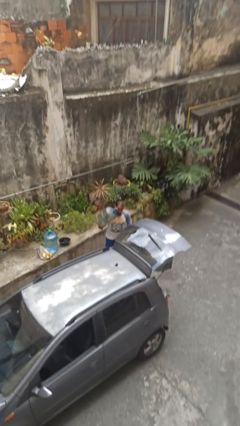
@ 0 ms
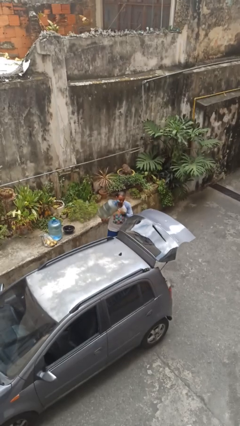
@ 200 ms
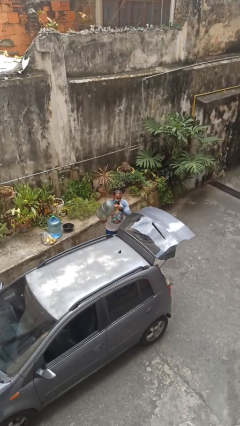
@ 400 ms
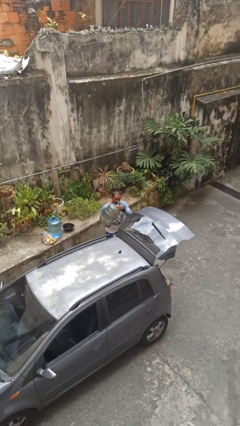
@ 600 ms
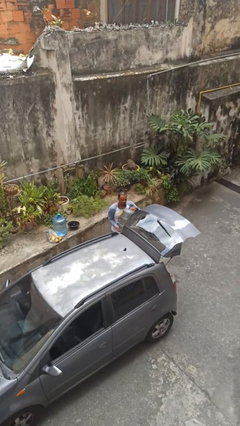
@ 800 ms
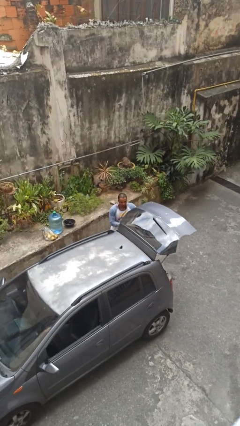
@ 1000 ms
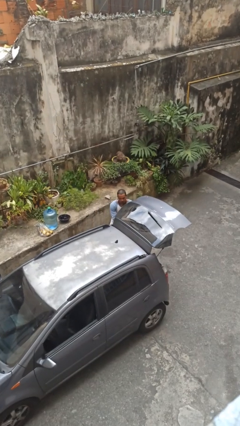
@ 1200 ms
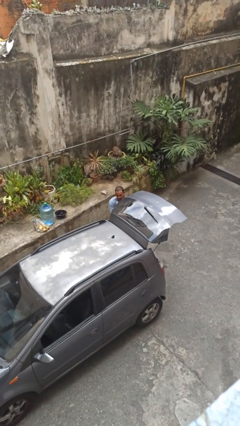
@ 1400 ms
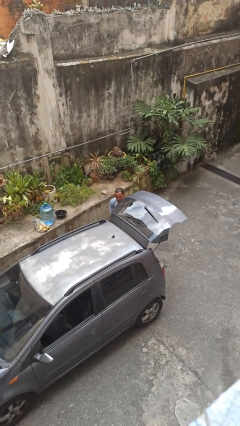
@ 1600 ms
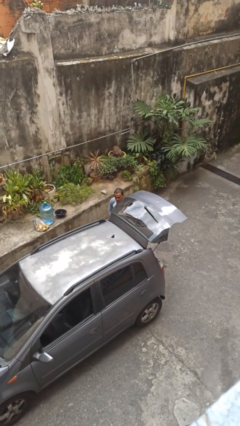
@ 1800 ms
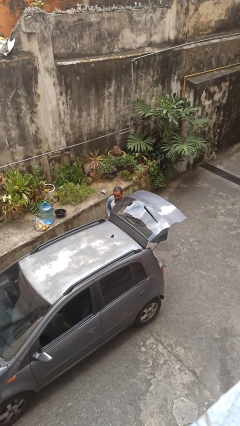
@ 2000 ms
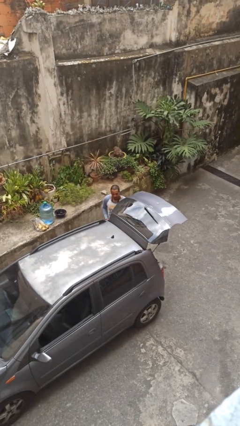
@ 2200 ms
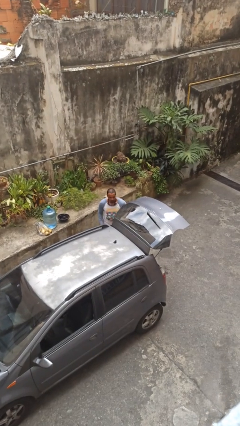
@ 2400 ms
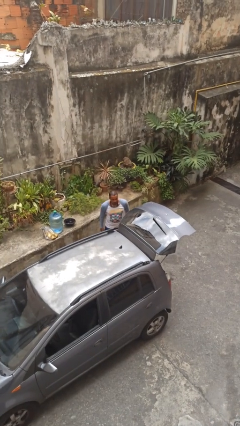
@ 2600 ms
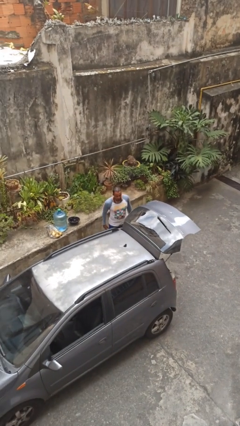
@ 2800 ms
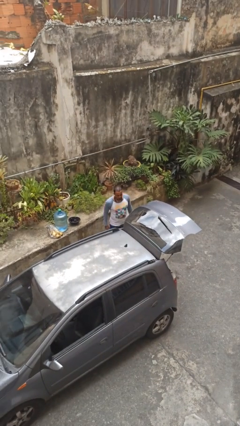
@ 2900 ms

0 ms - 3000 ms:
person loads car

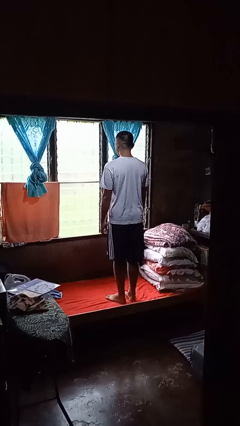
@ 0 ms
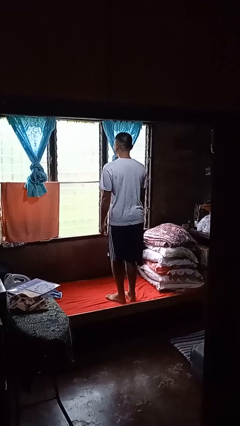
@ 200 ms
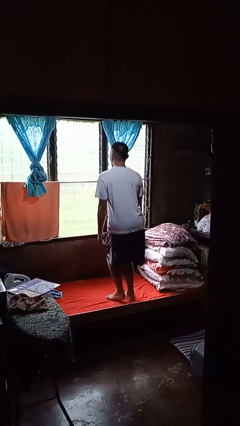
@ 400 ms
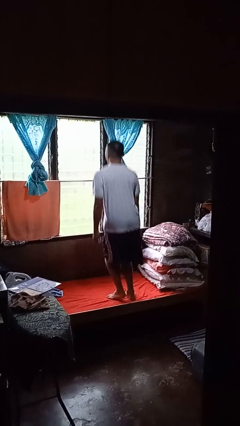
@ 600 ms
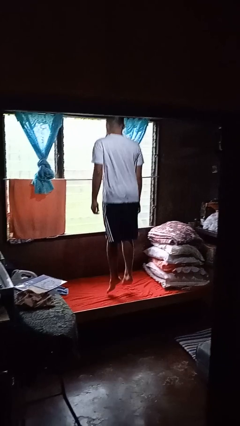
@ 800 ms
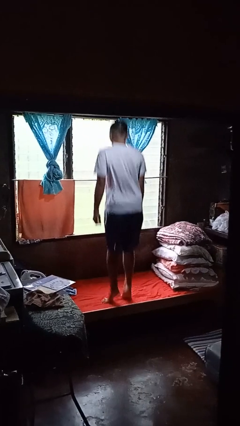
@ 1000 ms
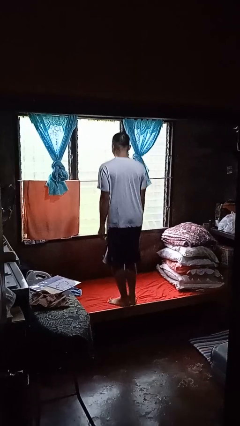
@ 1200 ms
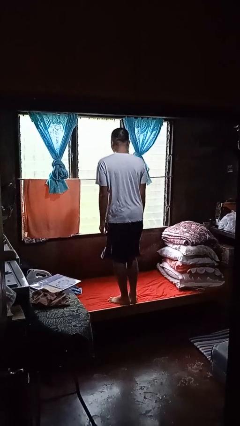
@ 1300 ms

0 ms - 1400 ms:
person jumps on bed

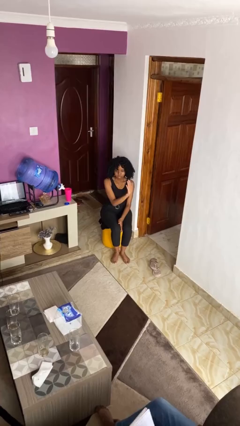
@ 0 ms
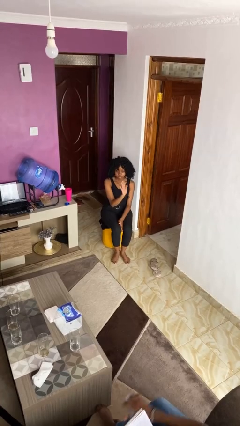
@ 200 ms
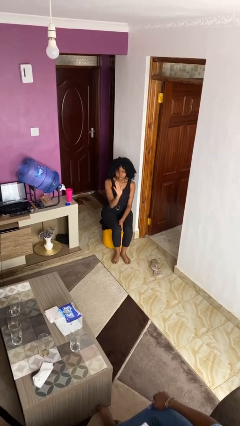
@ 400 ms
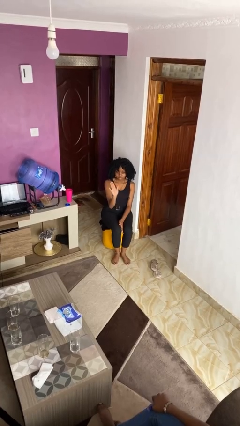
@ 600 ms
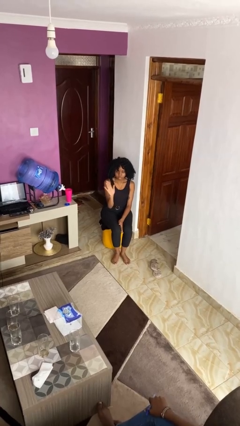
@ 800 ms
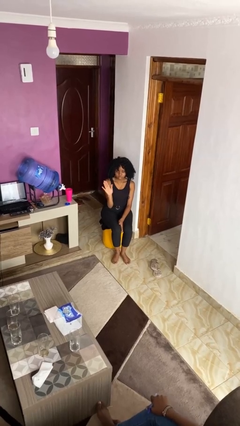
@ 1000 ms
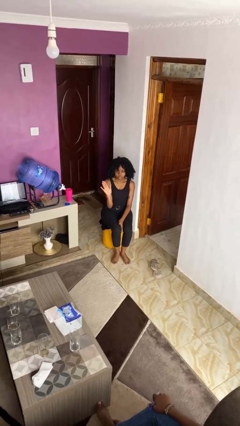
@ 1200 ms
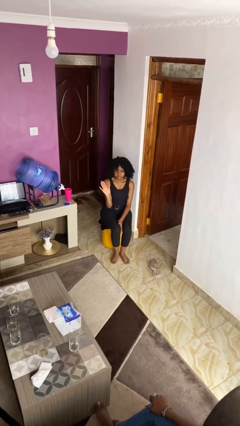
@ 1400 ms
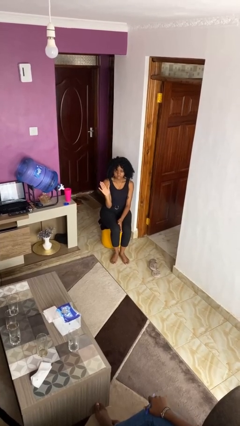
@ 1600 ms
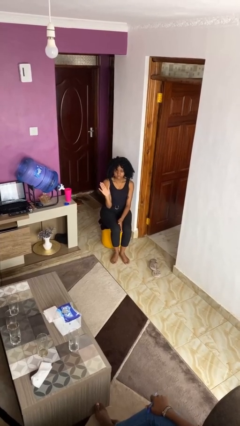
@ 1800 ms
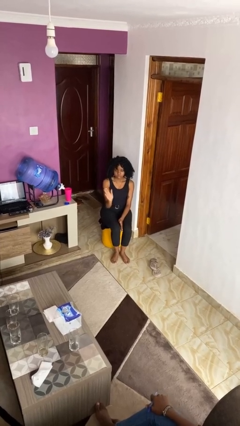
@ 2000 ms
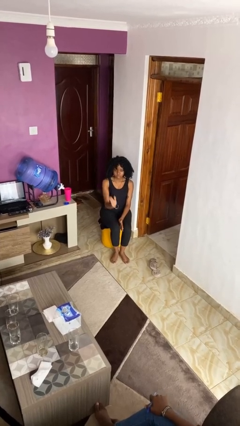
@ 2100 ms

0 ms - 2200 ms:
person gestures swipe right

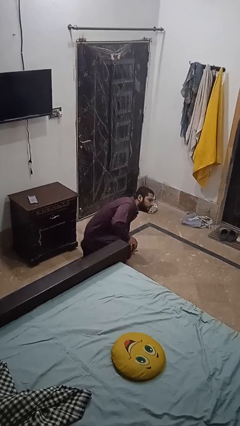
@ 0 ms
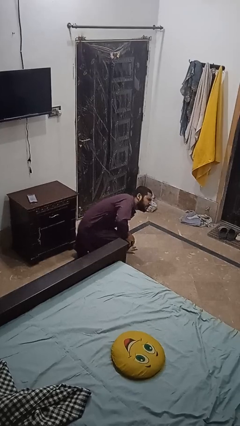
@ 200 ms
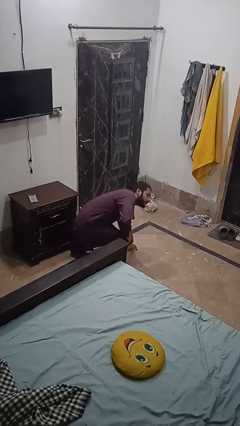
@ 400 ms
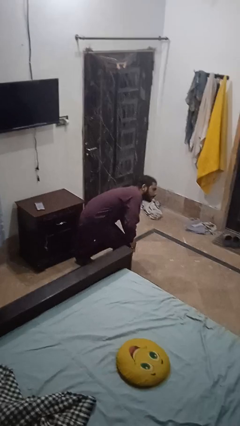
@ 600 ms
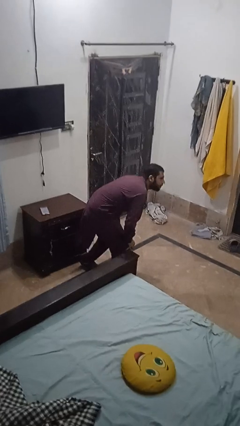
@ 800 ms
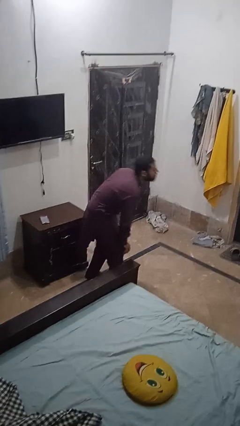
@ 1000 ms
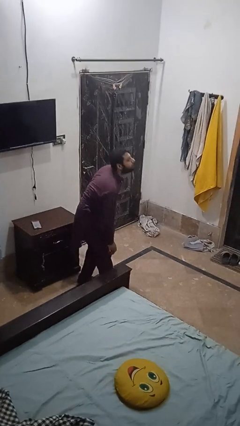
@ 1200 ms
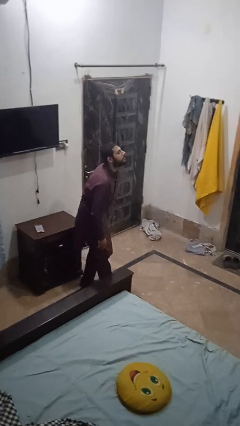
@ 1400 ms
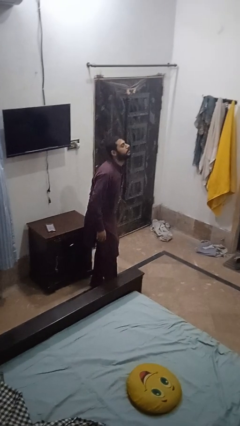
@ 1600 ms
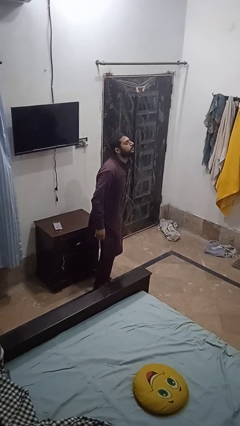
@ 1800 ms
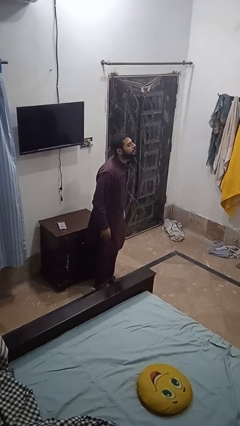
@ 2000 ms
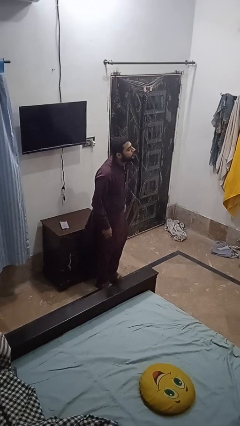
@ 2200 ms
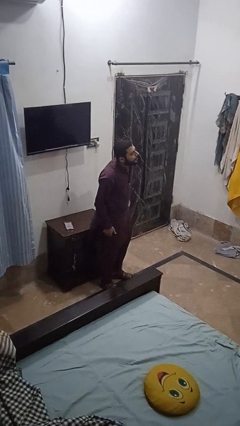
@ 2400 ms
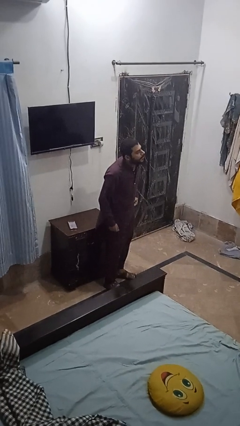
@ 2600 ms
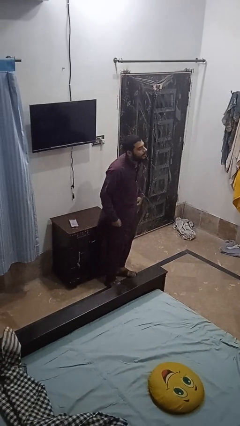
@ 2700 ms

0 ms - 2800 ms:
person stands up from floor

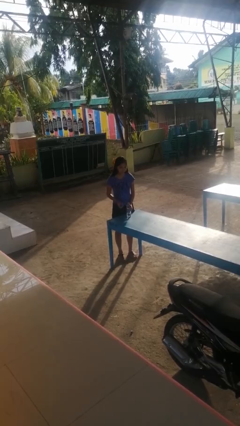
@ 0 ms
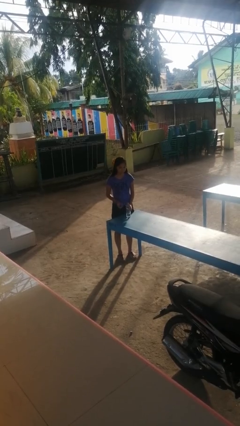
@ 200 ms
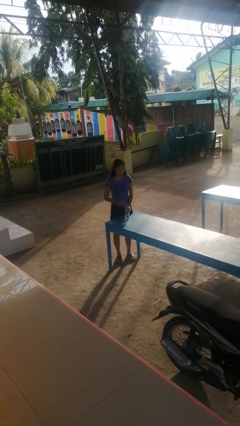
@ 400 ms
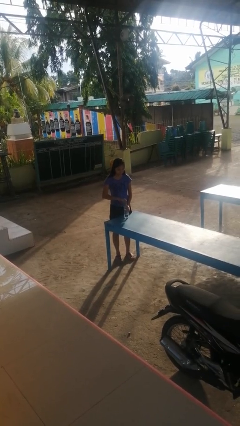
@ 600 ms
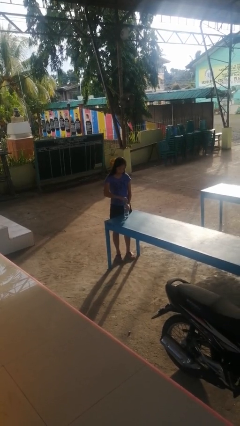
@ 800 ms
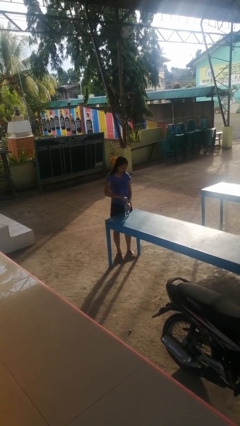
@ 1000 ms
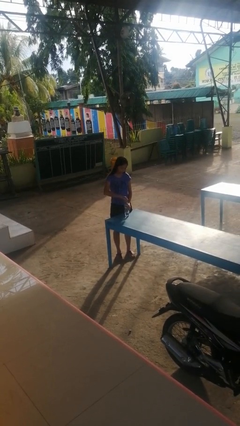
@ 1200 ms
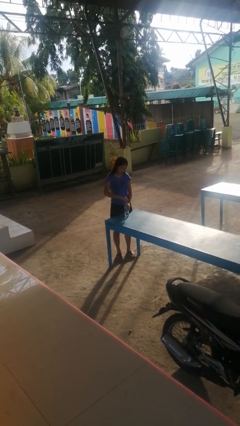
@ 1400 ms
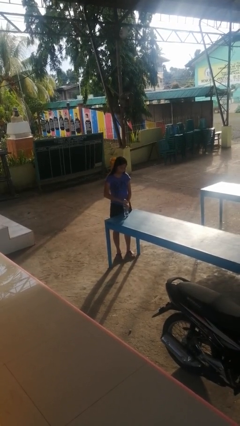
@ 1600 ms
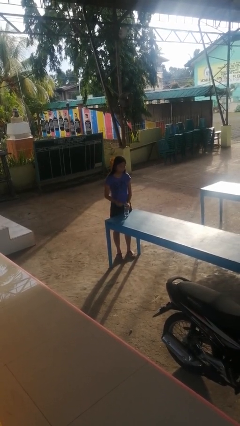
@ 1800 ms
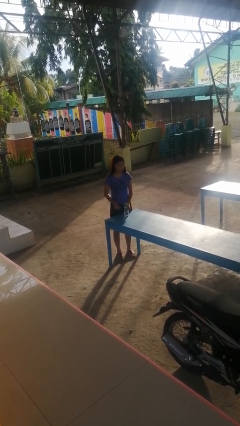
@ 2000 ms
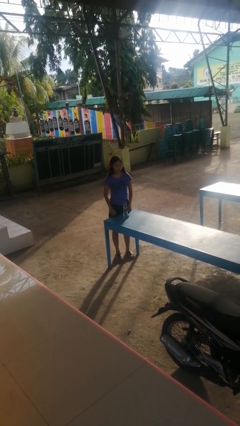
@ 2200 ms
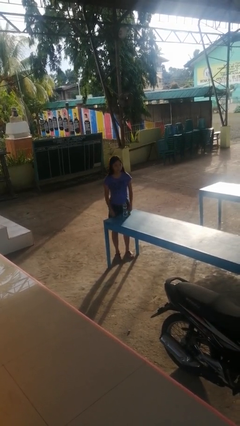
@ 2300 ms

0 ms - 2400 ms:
person screws lid to bottle

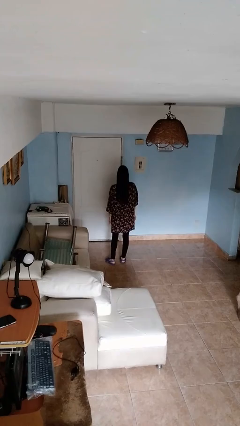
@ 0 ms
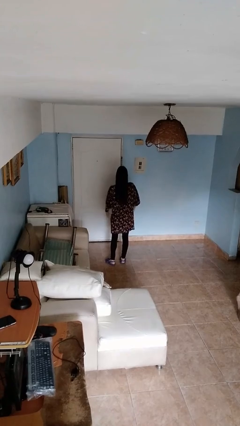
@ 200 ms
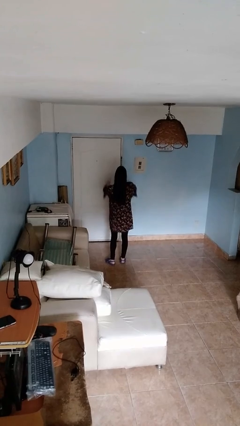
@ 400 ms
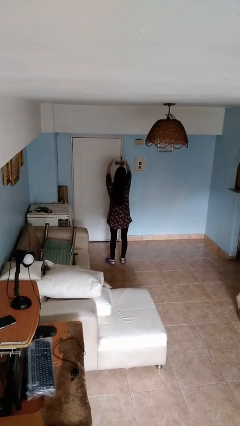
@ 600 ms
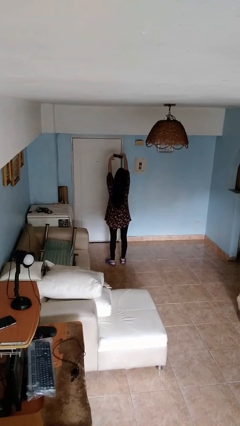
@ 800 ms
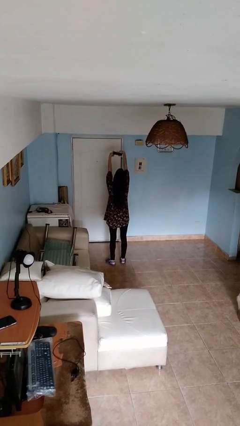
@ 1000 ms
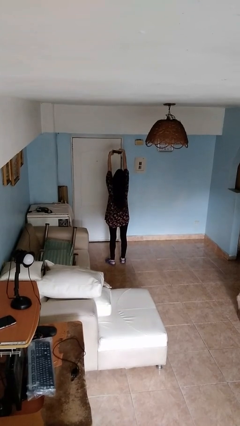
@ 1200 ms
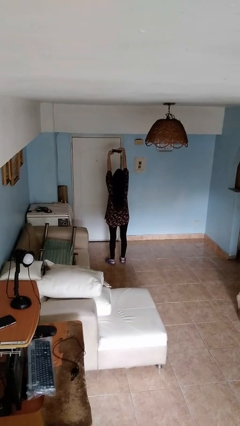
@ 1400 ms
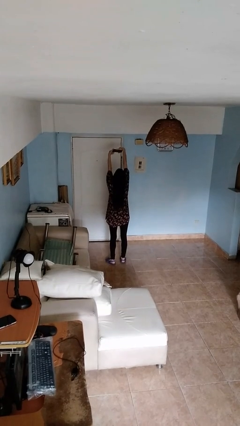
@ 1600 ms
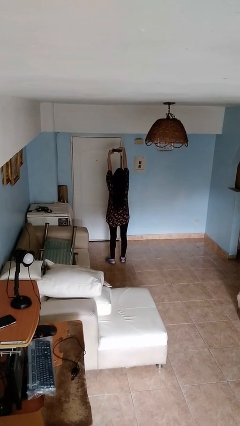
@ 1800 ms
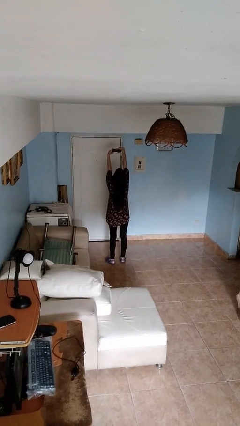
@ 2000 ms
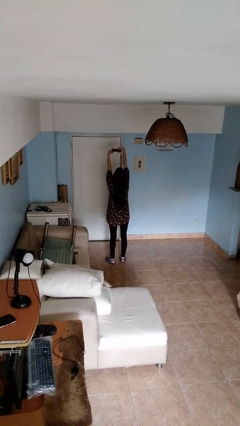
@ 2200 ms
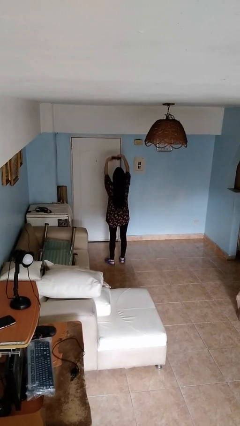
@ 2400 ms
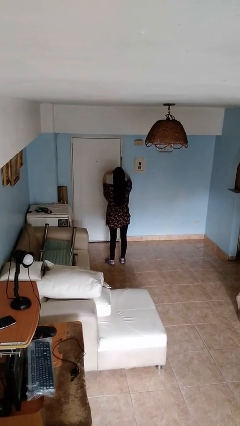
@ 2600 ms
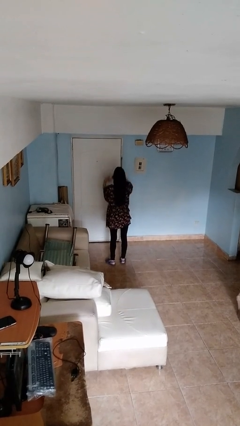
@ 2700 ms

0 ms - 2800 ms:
person takes selfie

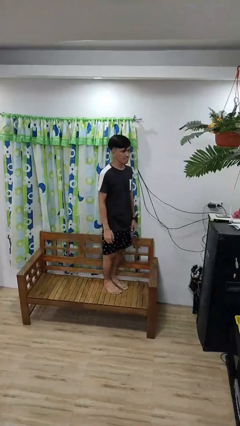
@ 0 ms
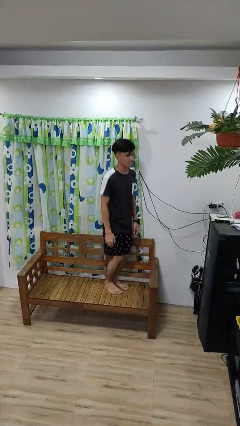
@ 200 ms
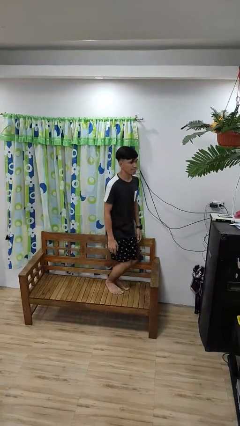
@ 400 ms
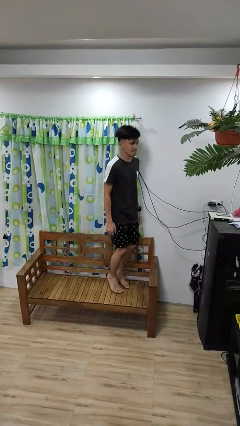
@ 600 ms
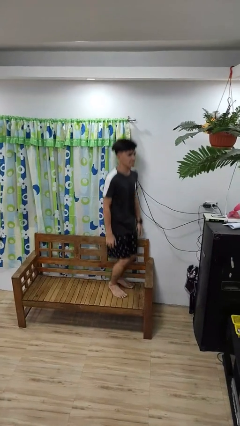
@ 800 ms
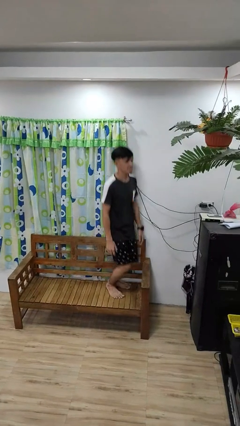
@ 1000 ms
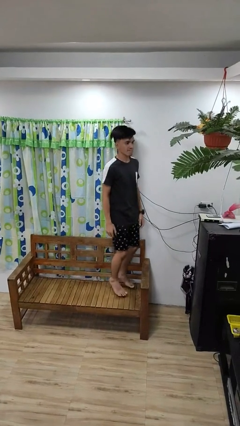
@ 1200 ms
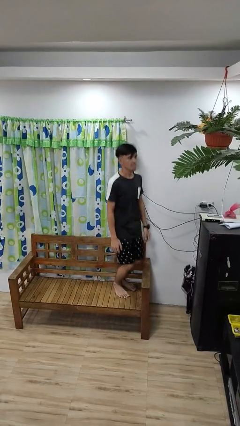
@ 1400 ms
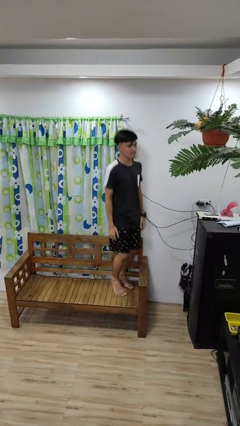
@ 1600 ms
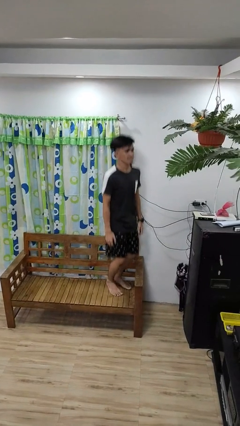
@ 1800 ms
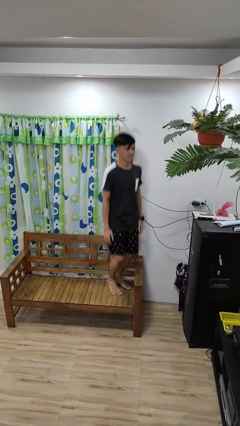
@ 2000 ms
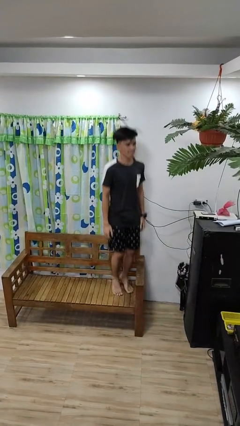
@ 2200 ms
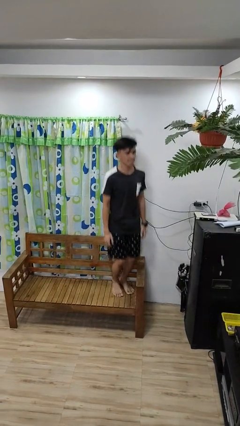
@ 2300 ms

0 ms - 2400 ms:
person jumps on couch

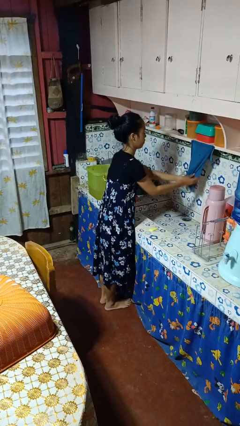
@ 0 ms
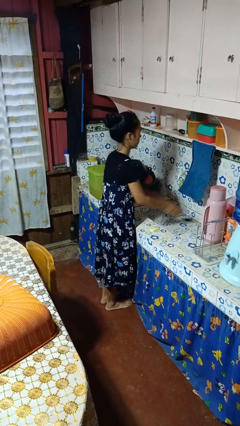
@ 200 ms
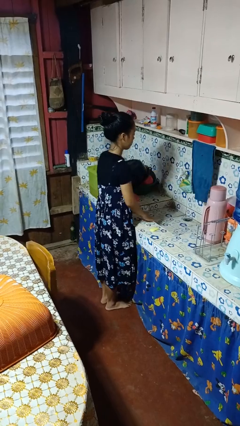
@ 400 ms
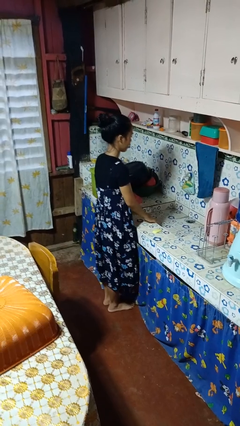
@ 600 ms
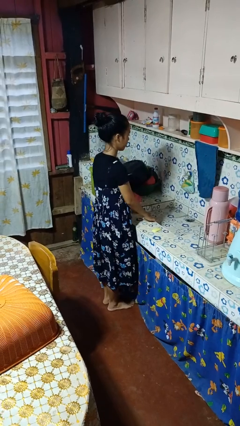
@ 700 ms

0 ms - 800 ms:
person dries hands with towel
